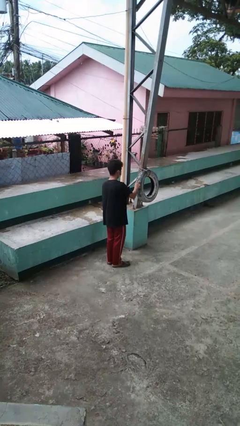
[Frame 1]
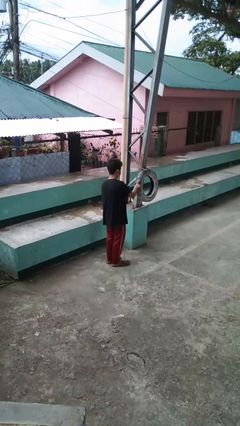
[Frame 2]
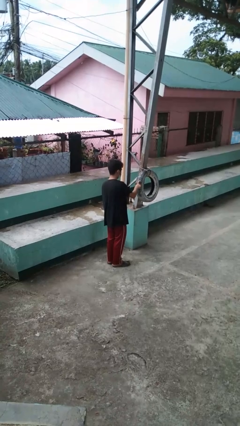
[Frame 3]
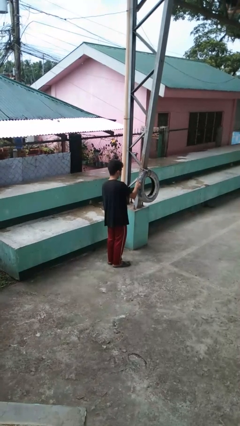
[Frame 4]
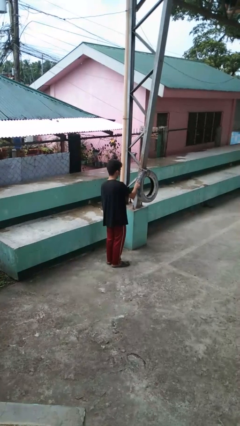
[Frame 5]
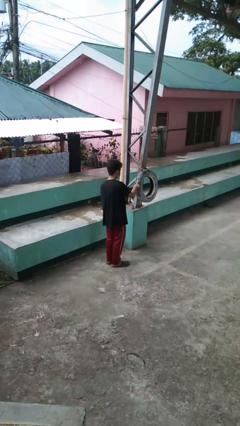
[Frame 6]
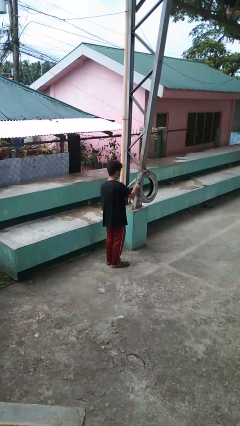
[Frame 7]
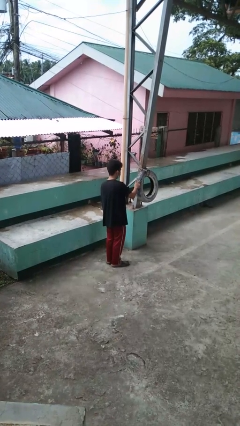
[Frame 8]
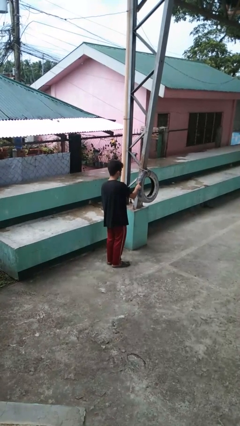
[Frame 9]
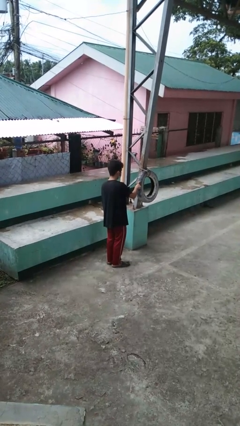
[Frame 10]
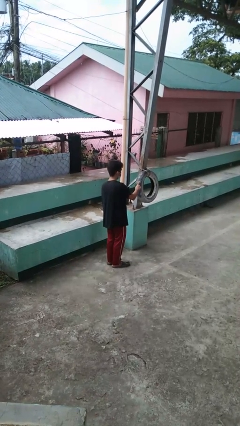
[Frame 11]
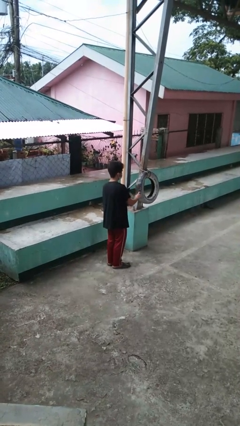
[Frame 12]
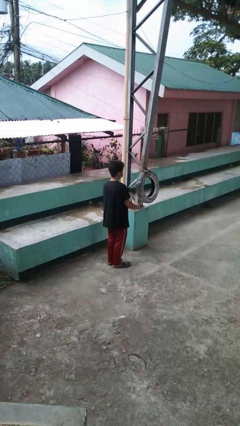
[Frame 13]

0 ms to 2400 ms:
person taps object with finger

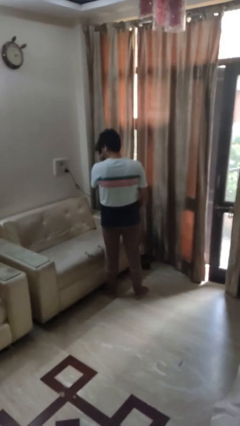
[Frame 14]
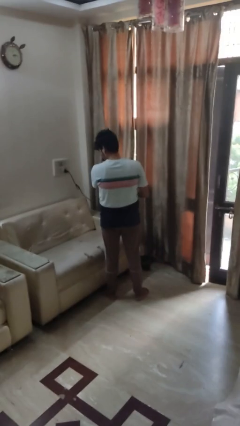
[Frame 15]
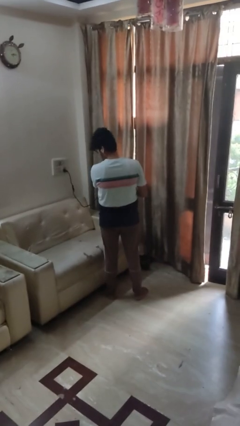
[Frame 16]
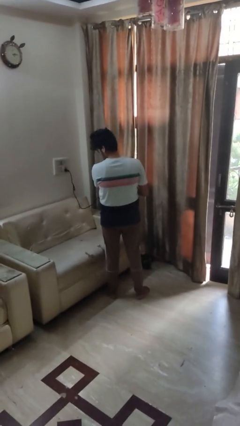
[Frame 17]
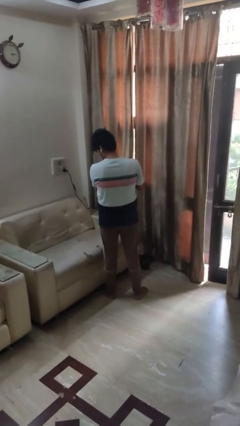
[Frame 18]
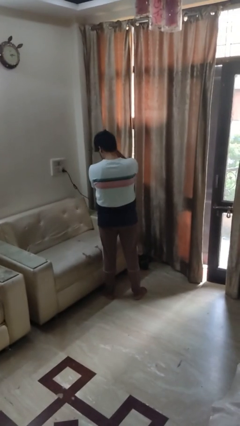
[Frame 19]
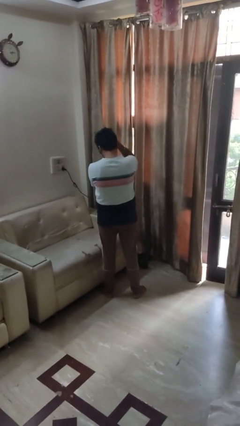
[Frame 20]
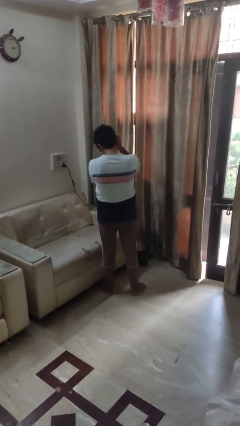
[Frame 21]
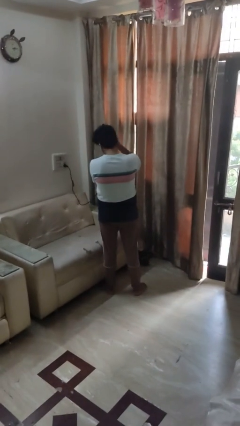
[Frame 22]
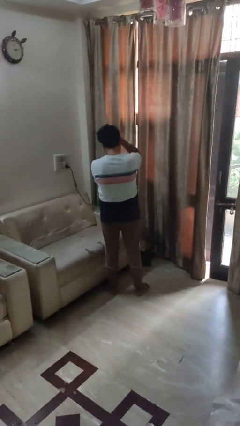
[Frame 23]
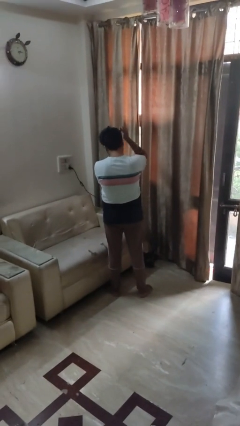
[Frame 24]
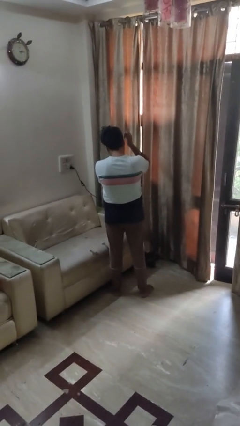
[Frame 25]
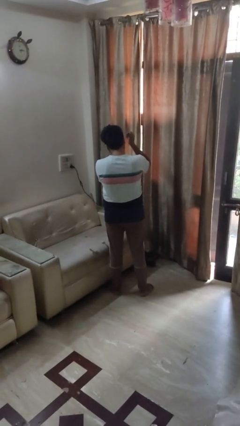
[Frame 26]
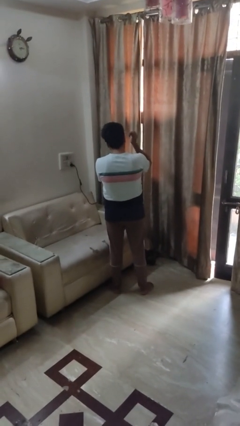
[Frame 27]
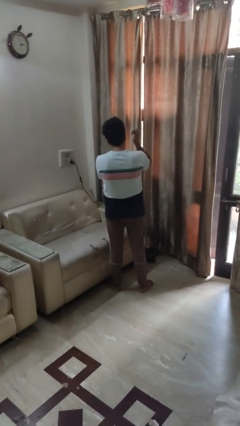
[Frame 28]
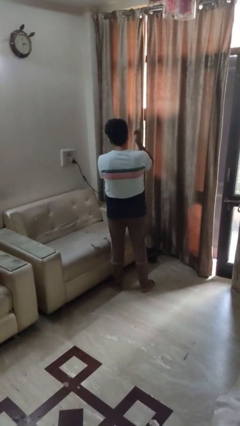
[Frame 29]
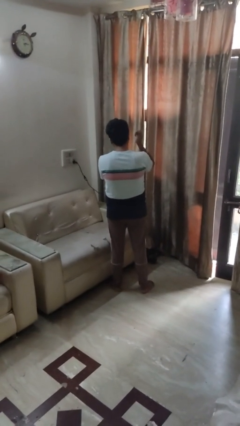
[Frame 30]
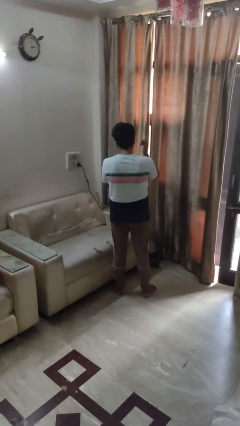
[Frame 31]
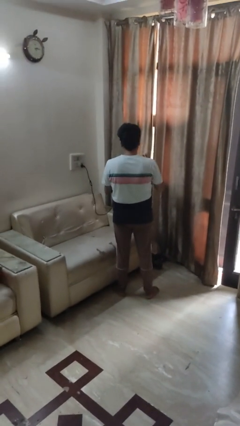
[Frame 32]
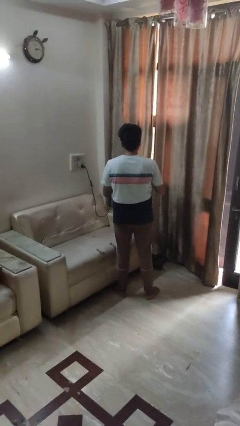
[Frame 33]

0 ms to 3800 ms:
person dries hair with hairdryer

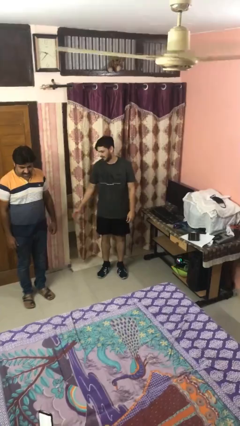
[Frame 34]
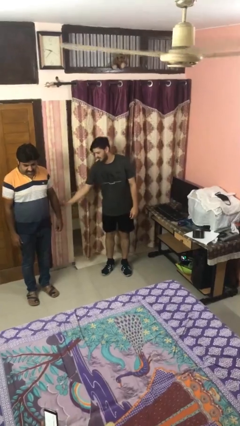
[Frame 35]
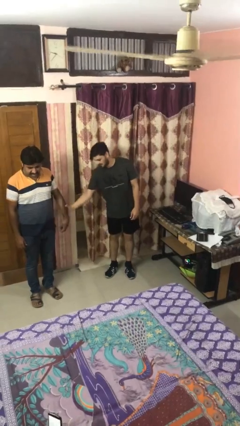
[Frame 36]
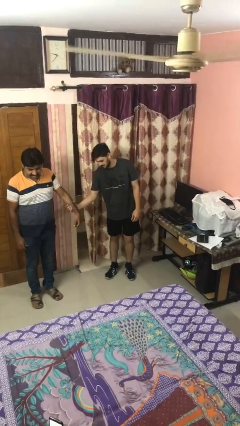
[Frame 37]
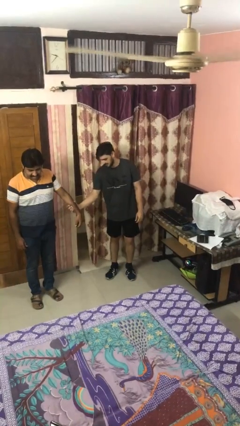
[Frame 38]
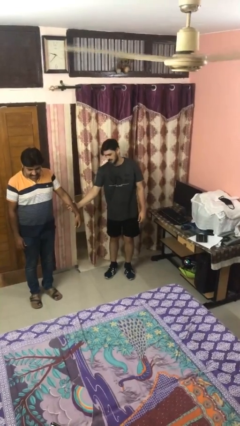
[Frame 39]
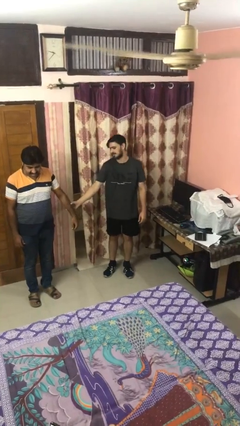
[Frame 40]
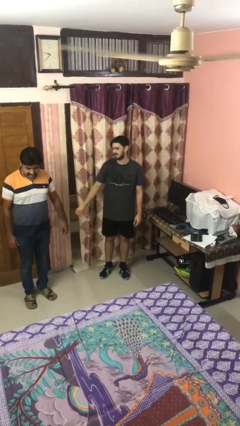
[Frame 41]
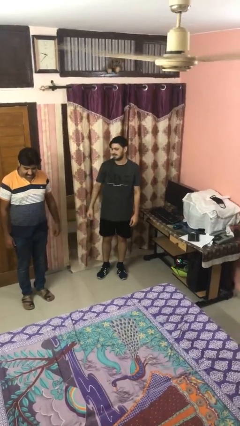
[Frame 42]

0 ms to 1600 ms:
person grabs person by forearm

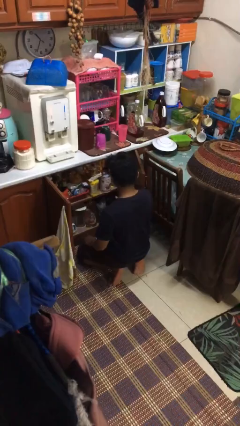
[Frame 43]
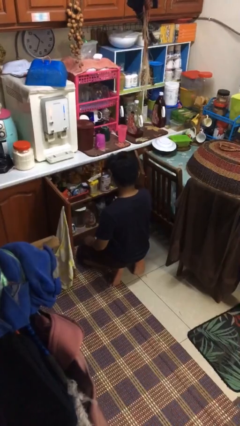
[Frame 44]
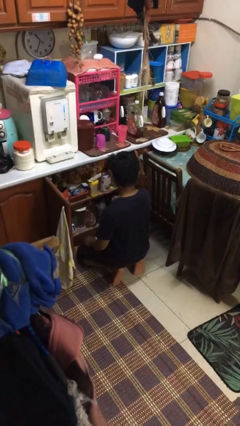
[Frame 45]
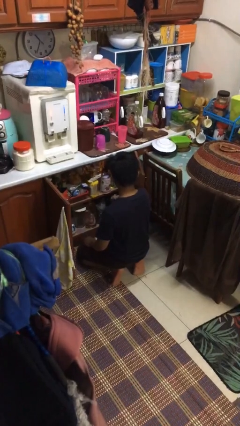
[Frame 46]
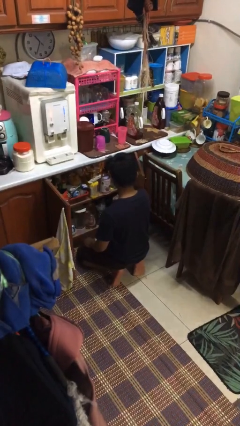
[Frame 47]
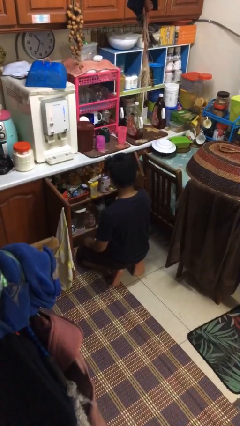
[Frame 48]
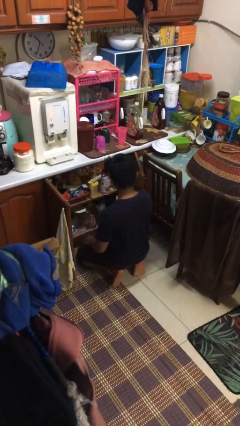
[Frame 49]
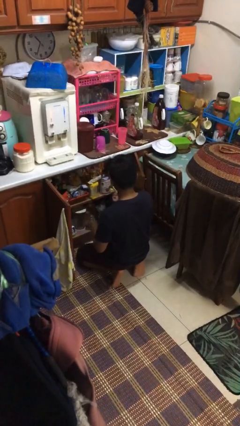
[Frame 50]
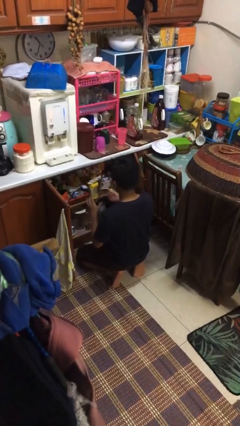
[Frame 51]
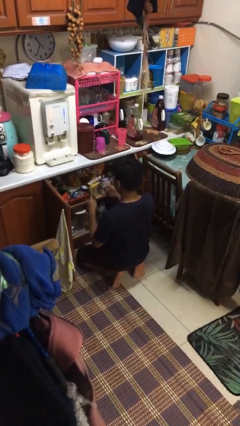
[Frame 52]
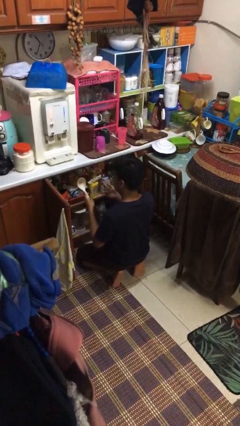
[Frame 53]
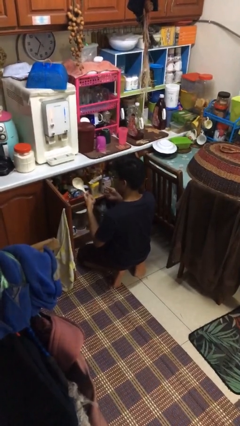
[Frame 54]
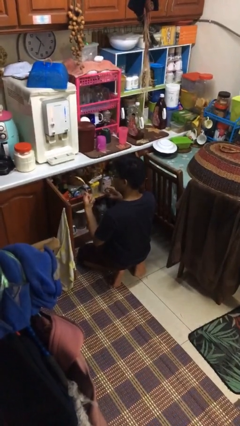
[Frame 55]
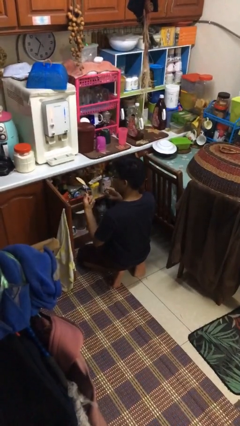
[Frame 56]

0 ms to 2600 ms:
person takes object from cabinet

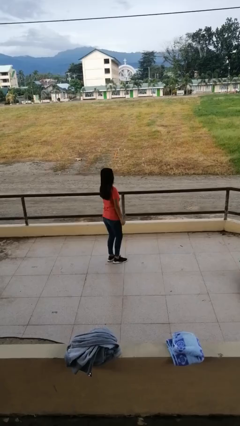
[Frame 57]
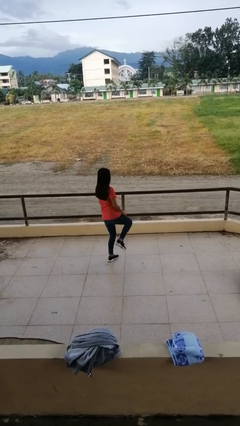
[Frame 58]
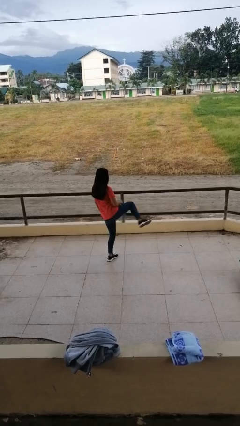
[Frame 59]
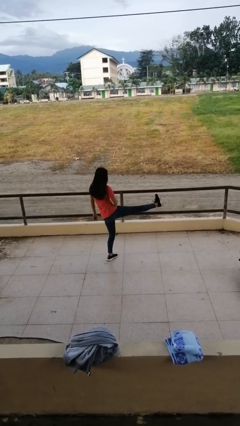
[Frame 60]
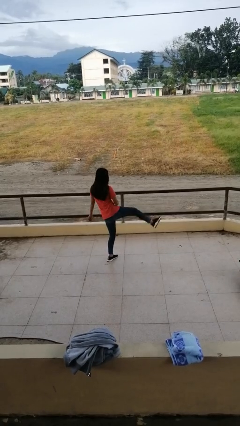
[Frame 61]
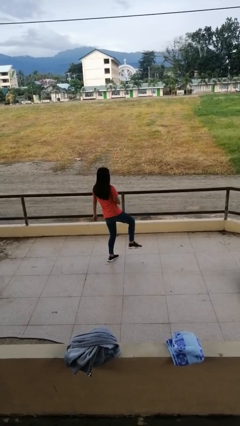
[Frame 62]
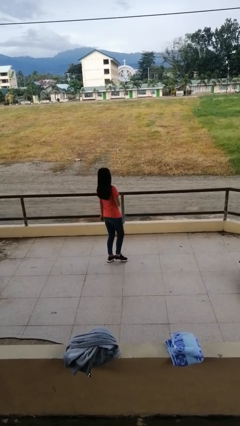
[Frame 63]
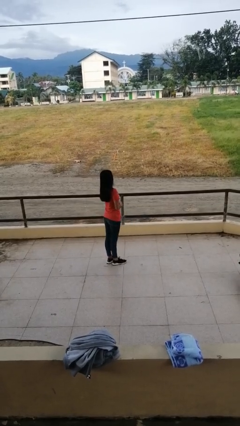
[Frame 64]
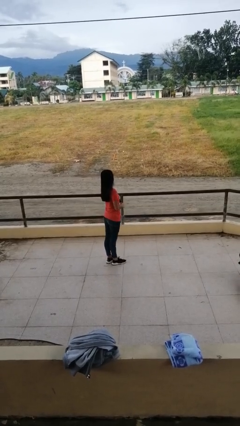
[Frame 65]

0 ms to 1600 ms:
person karate kicks

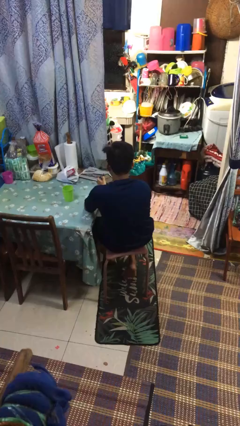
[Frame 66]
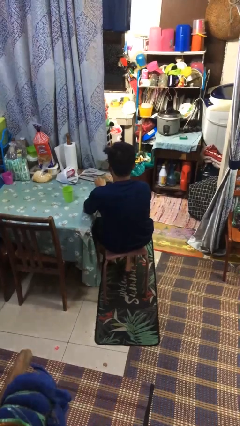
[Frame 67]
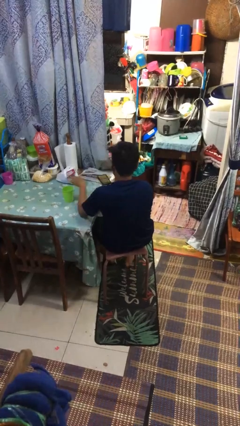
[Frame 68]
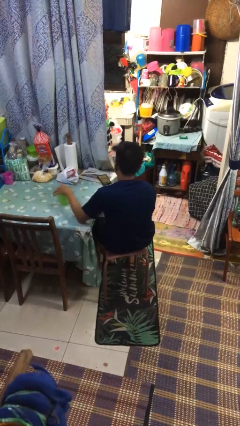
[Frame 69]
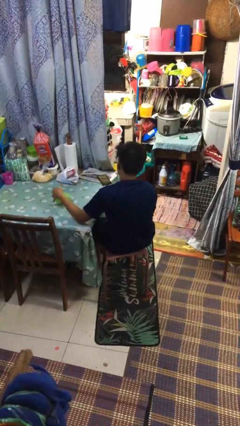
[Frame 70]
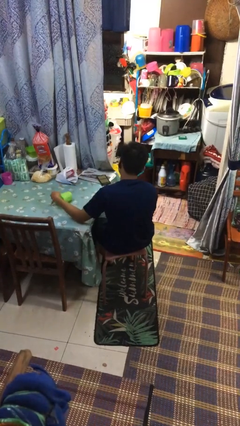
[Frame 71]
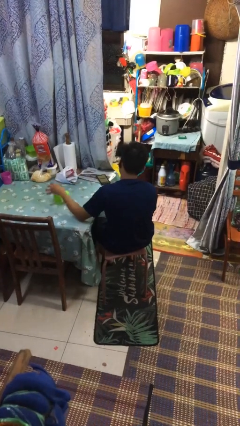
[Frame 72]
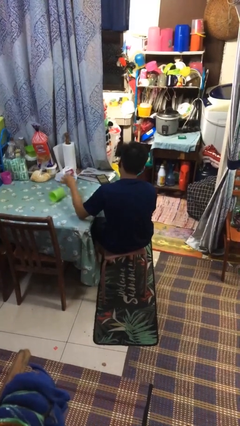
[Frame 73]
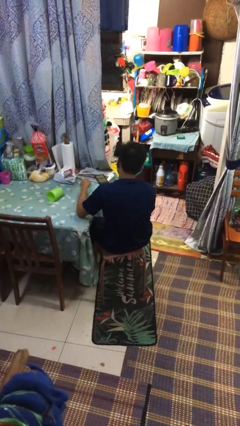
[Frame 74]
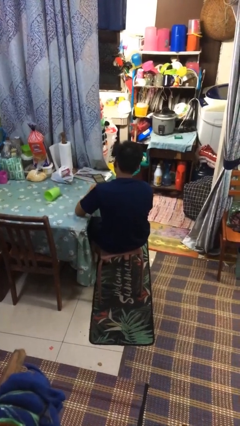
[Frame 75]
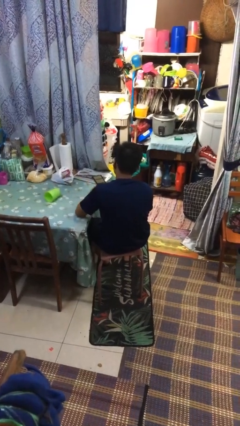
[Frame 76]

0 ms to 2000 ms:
person knocks over glass

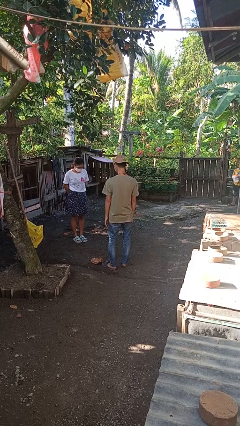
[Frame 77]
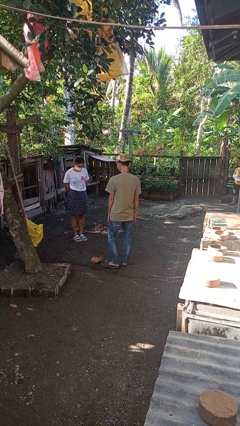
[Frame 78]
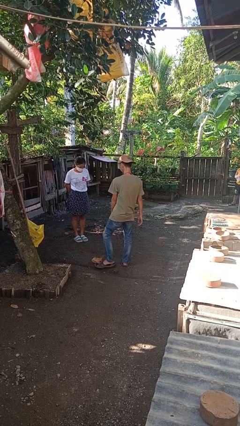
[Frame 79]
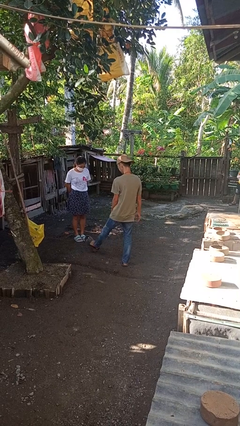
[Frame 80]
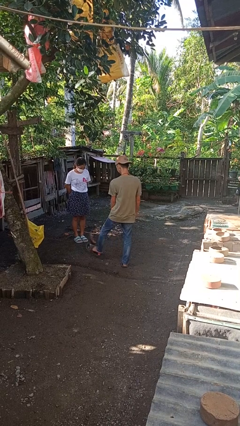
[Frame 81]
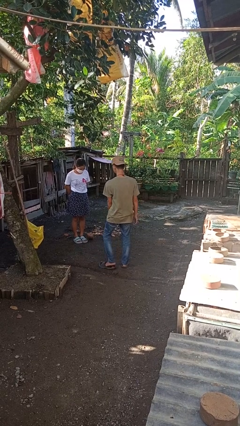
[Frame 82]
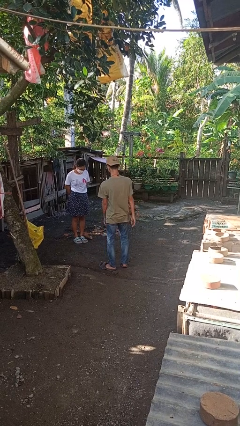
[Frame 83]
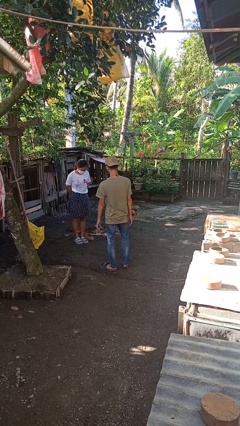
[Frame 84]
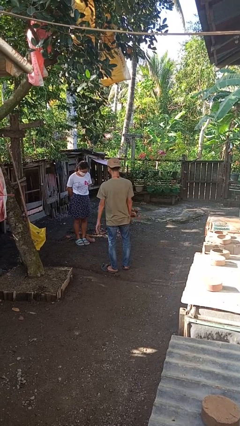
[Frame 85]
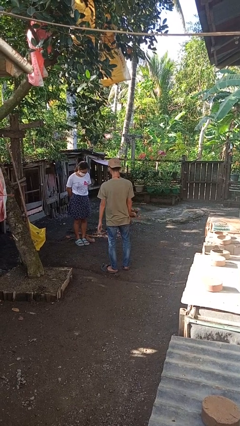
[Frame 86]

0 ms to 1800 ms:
person kicks object to person

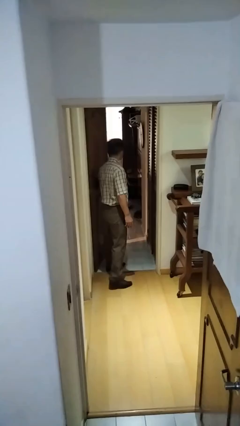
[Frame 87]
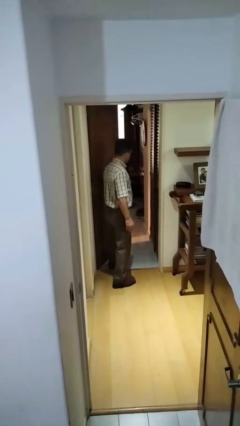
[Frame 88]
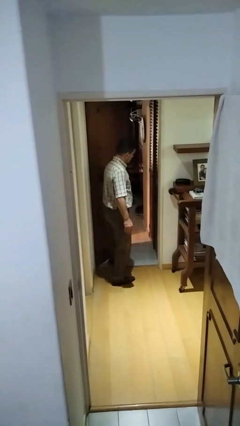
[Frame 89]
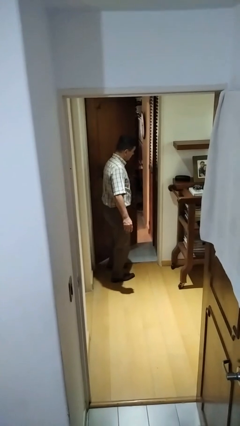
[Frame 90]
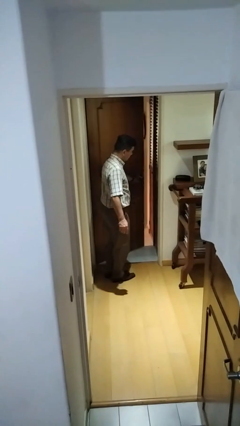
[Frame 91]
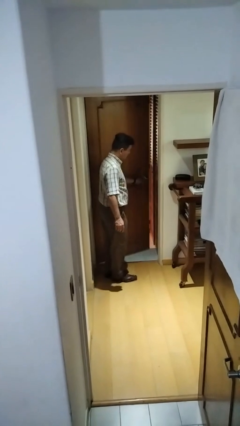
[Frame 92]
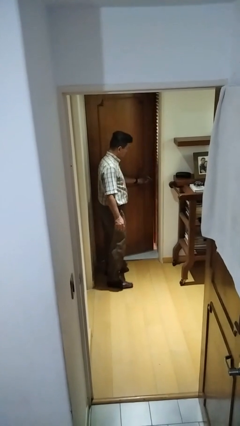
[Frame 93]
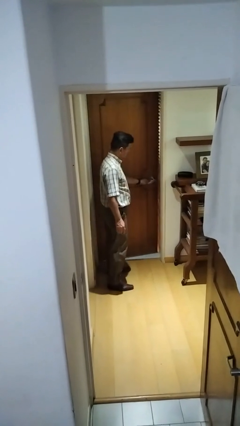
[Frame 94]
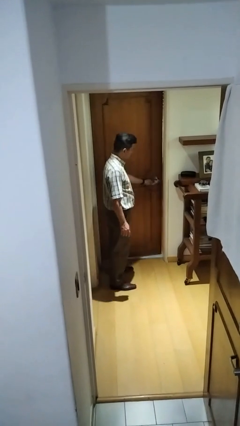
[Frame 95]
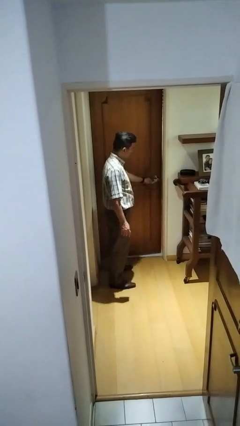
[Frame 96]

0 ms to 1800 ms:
person closes facility door
